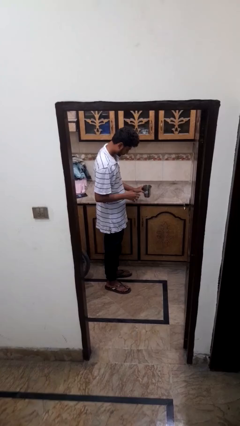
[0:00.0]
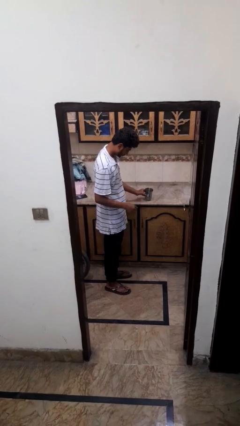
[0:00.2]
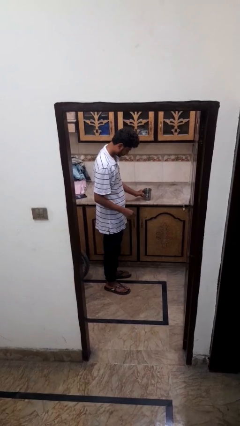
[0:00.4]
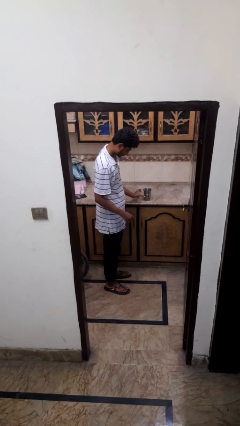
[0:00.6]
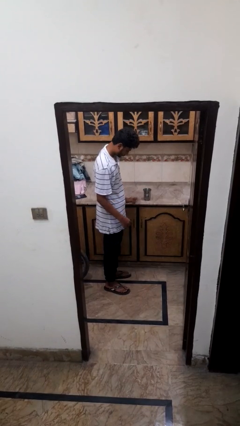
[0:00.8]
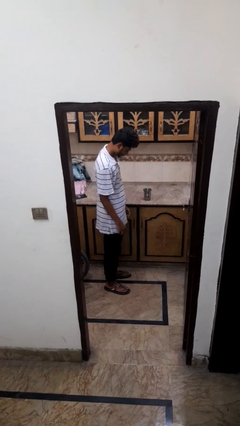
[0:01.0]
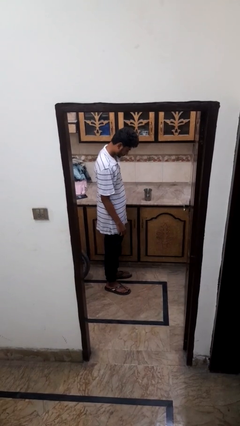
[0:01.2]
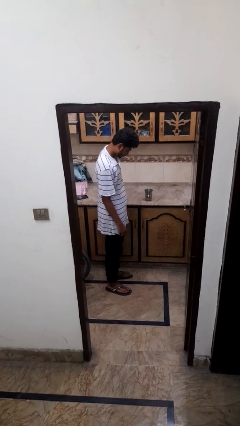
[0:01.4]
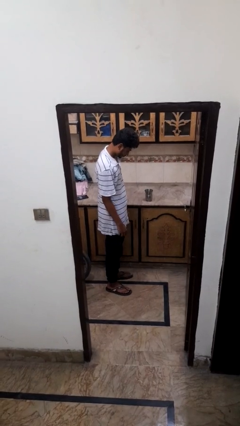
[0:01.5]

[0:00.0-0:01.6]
person puts down object on countertop

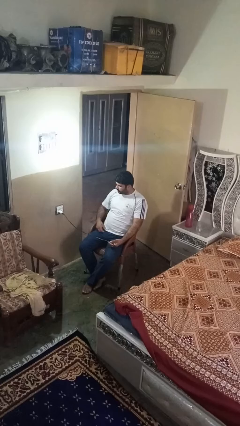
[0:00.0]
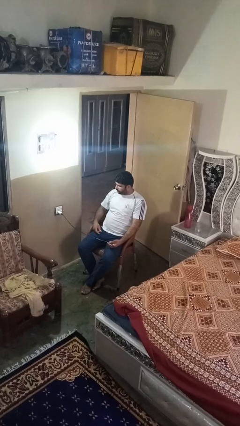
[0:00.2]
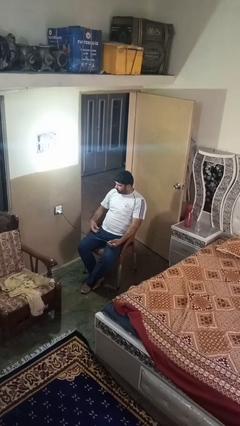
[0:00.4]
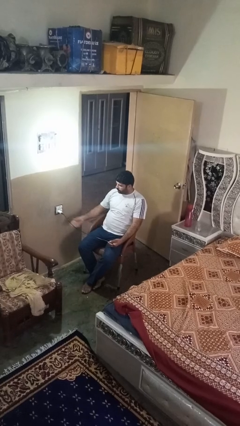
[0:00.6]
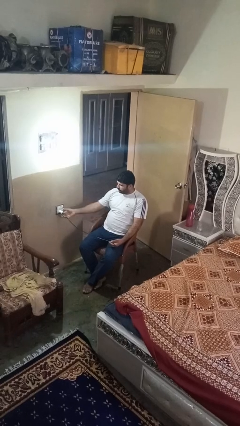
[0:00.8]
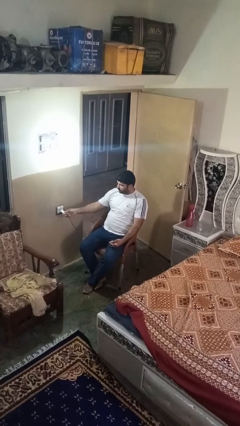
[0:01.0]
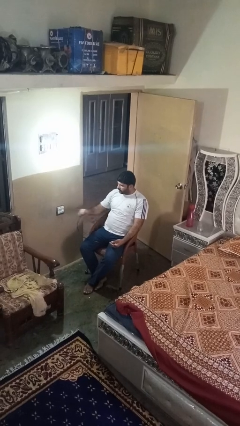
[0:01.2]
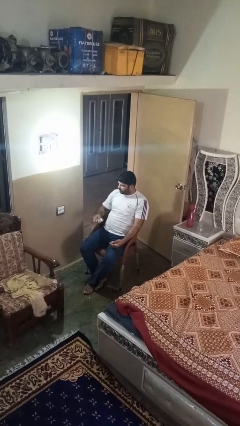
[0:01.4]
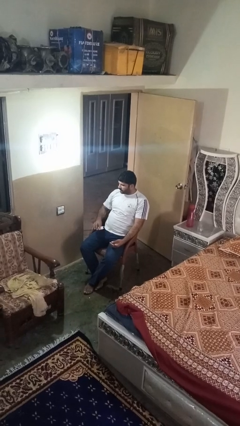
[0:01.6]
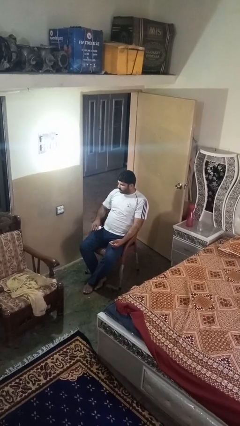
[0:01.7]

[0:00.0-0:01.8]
person unplugs from electrical socket

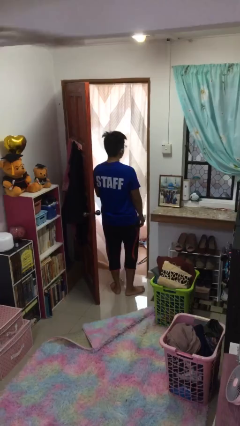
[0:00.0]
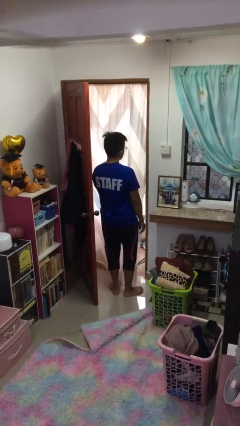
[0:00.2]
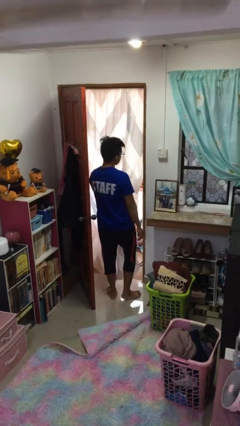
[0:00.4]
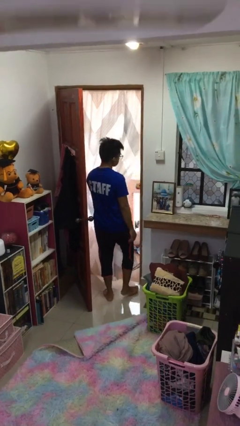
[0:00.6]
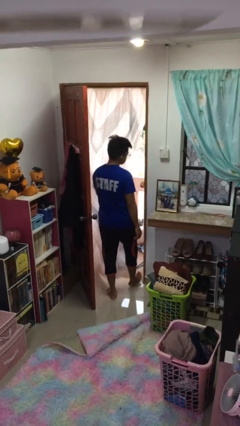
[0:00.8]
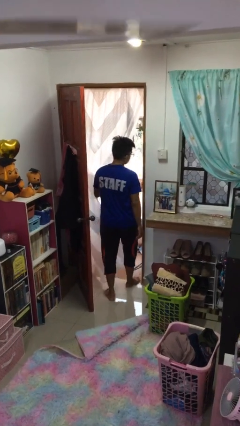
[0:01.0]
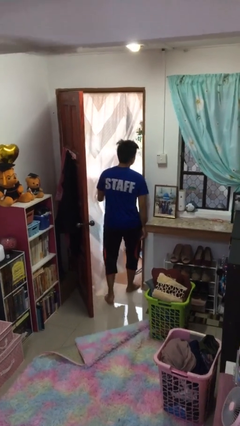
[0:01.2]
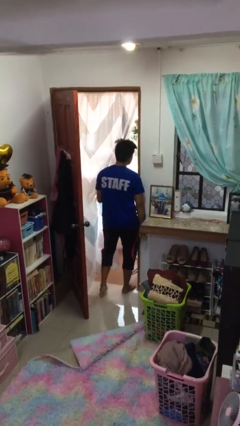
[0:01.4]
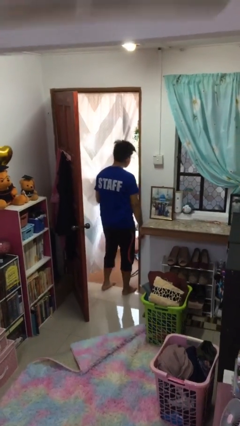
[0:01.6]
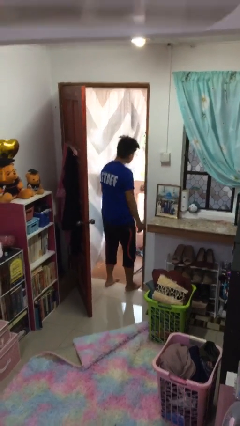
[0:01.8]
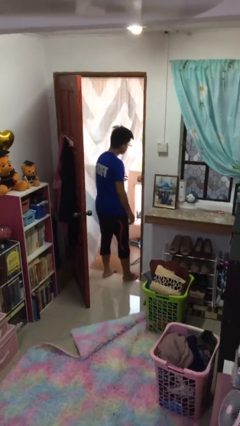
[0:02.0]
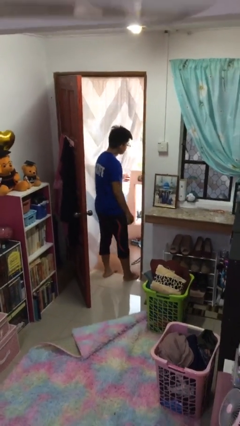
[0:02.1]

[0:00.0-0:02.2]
person bumps into wall

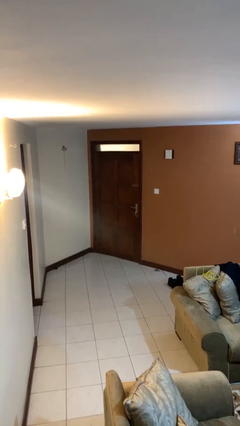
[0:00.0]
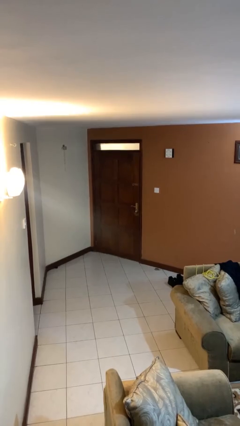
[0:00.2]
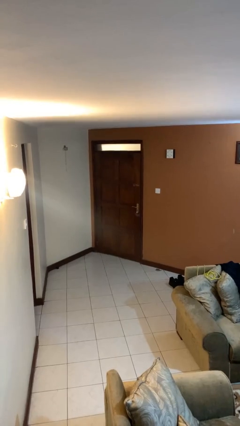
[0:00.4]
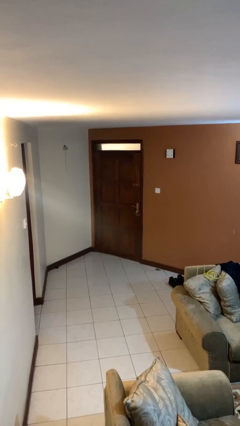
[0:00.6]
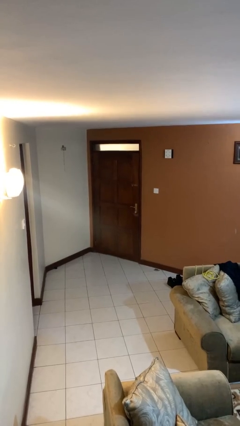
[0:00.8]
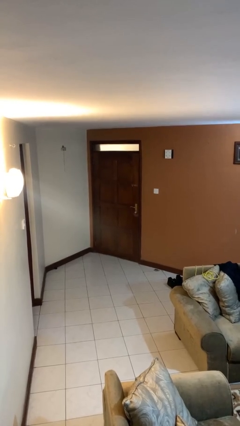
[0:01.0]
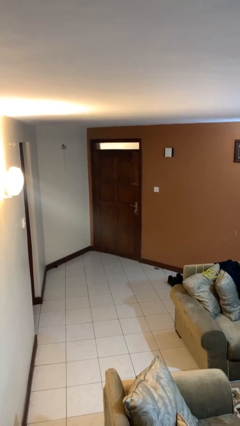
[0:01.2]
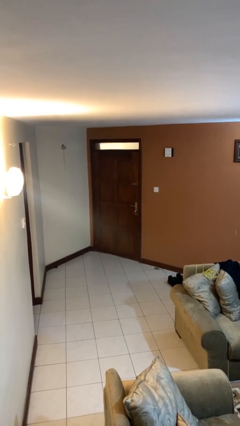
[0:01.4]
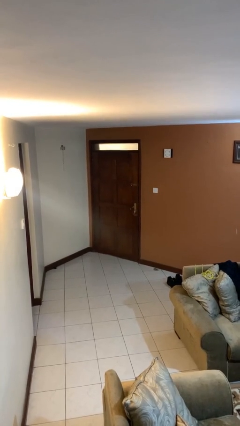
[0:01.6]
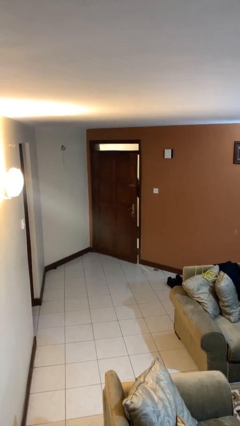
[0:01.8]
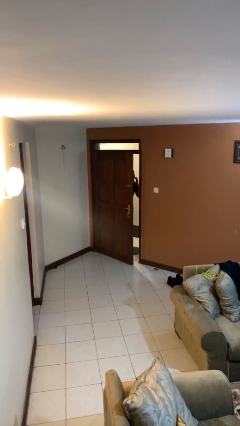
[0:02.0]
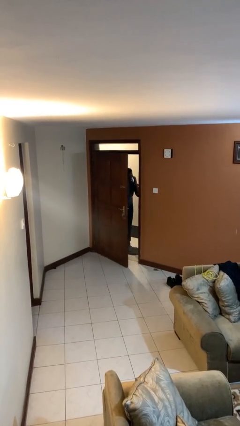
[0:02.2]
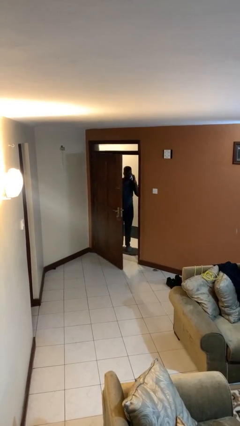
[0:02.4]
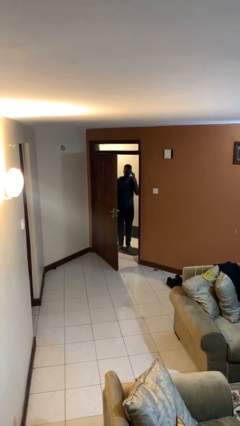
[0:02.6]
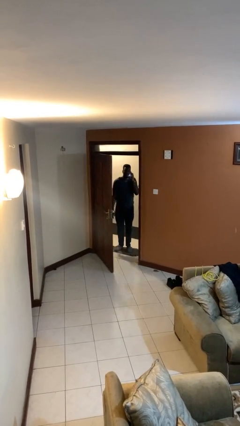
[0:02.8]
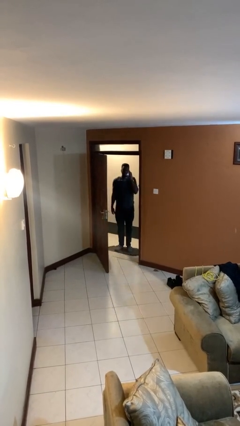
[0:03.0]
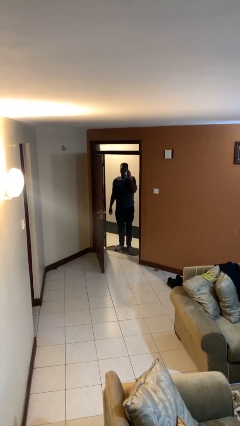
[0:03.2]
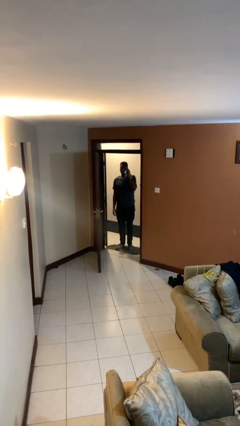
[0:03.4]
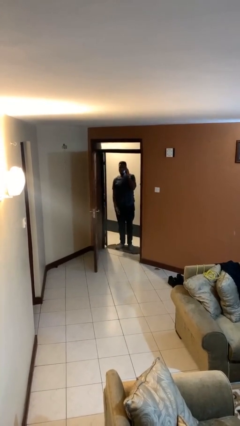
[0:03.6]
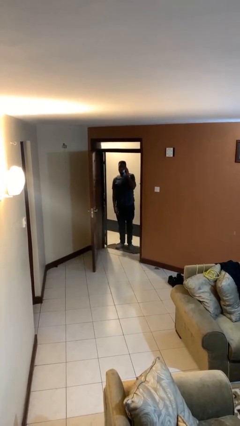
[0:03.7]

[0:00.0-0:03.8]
person opens facility door

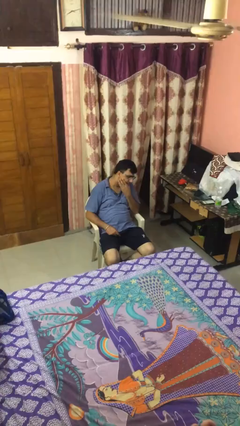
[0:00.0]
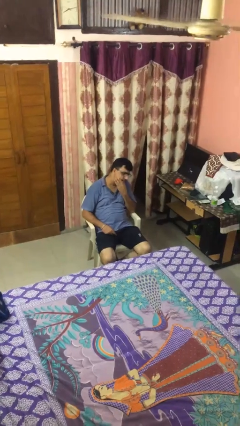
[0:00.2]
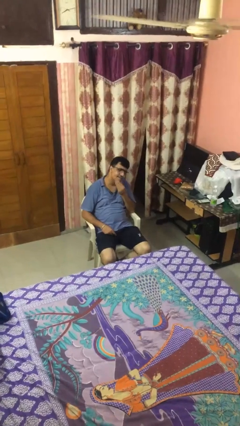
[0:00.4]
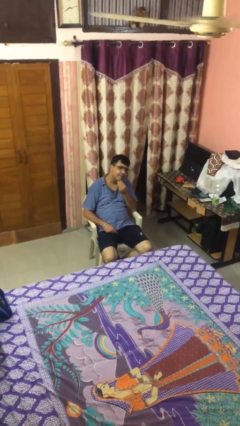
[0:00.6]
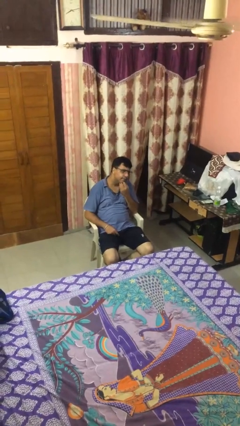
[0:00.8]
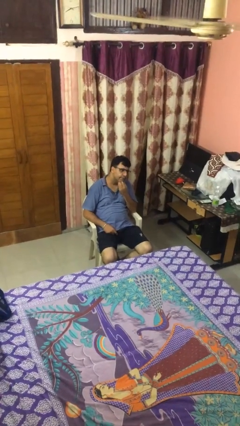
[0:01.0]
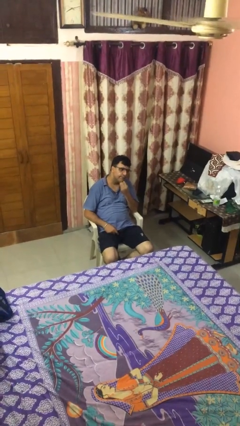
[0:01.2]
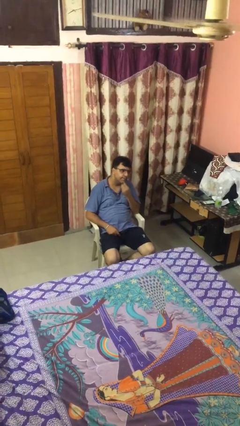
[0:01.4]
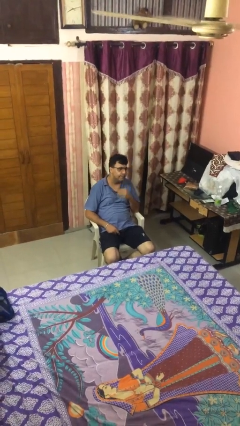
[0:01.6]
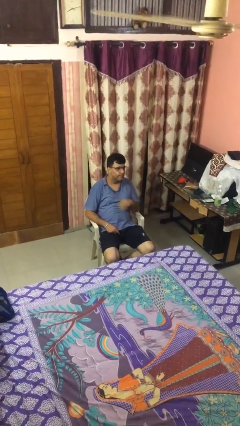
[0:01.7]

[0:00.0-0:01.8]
person strokes chin

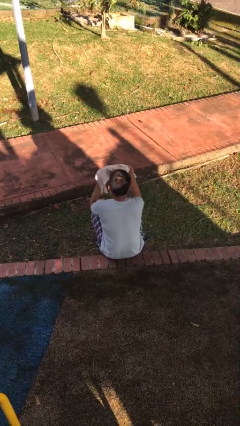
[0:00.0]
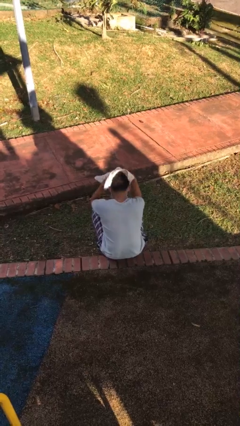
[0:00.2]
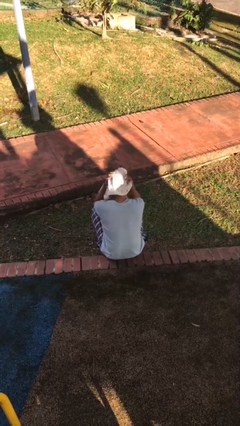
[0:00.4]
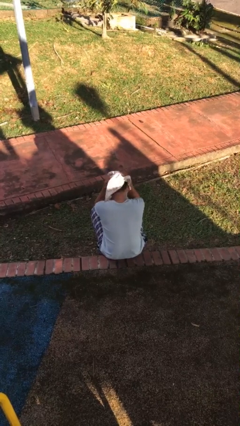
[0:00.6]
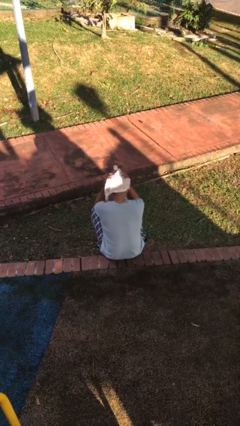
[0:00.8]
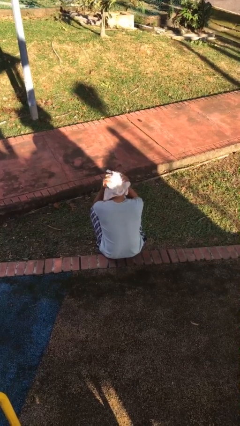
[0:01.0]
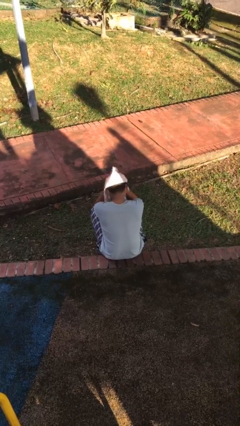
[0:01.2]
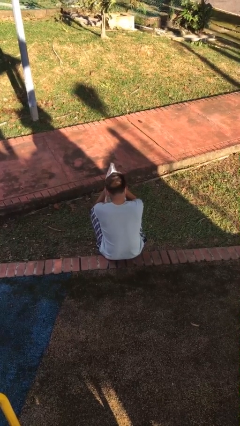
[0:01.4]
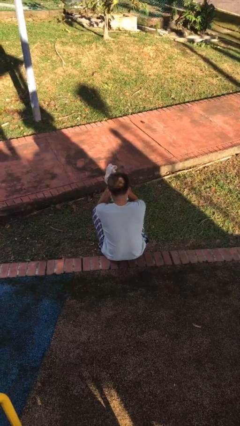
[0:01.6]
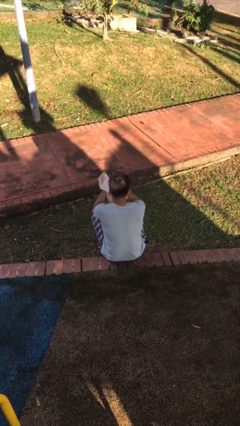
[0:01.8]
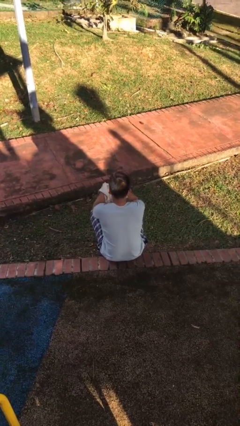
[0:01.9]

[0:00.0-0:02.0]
person dries hair with towel

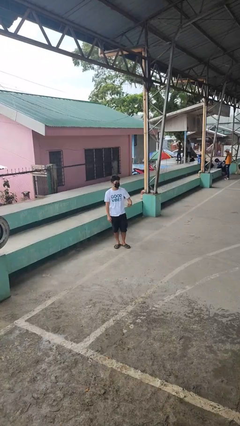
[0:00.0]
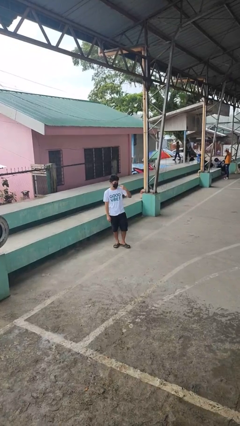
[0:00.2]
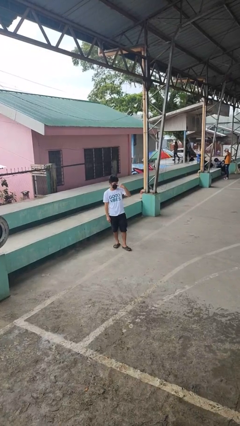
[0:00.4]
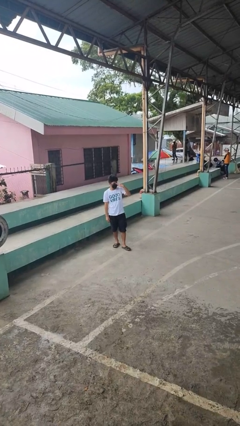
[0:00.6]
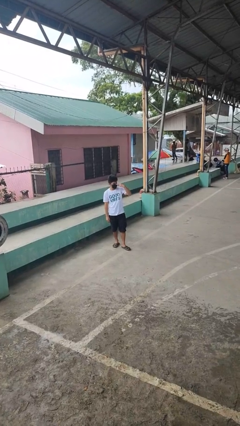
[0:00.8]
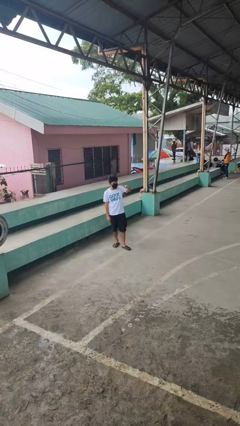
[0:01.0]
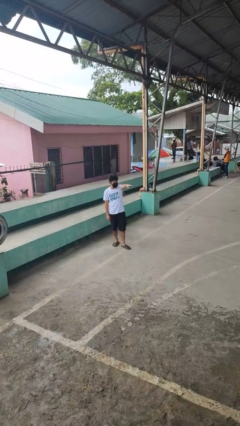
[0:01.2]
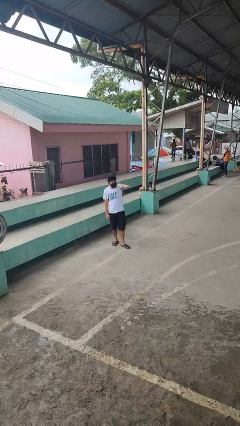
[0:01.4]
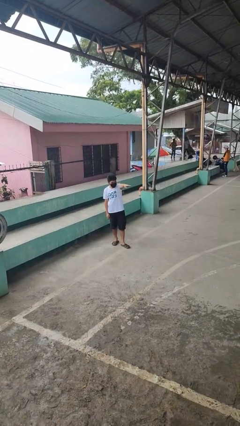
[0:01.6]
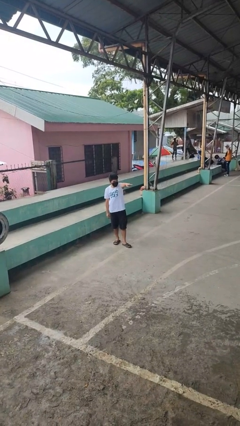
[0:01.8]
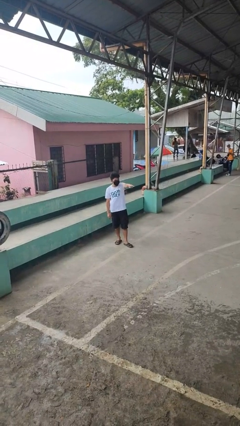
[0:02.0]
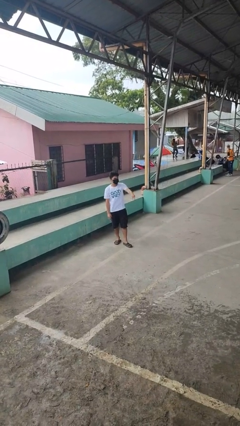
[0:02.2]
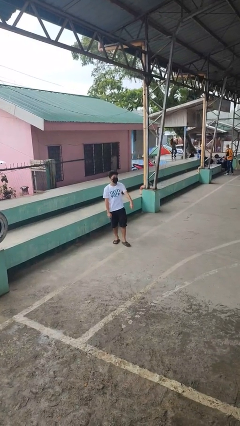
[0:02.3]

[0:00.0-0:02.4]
person gestures watch closely

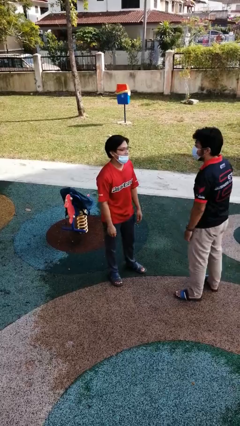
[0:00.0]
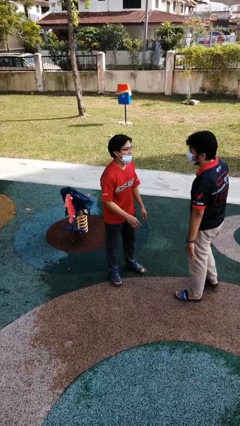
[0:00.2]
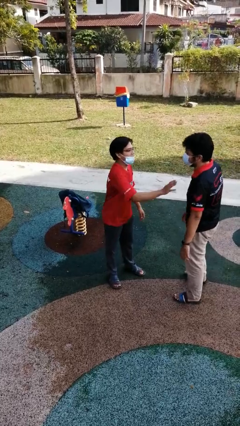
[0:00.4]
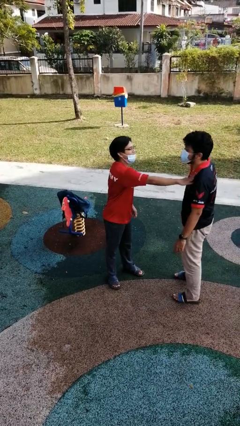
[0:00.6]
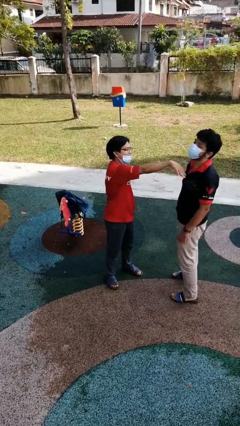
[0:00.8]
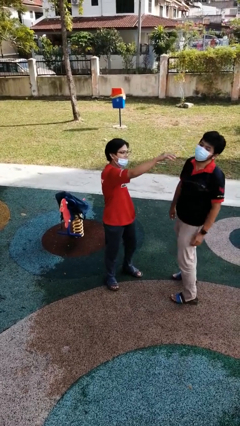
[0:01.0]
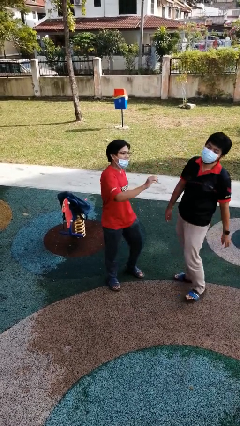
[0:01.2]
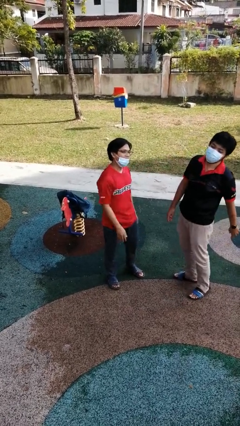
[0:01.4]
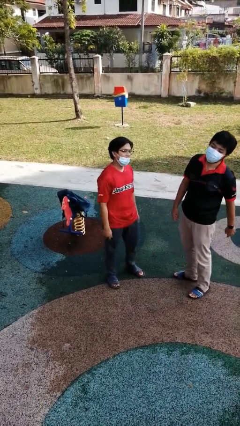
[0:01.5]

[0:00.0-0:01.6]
person shoves person
